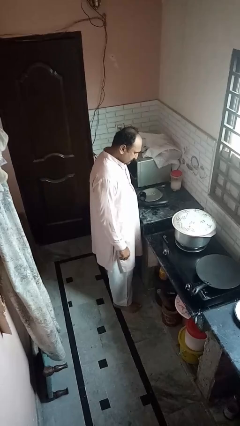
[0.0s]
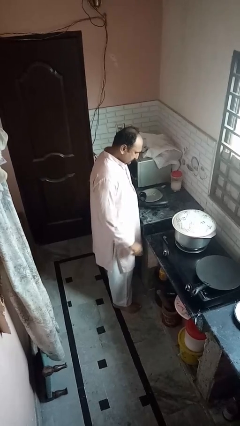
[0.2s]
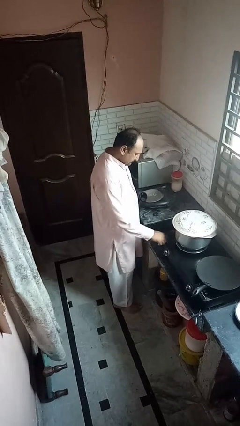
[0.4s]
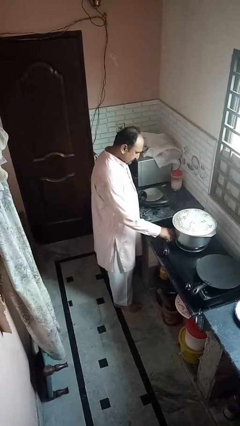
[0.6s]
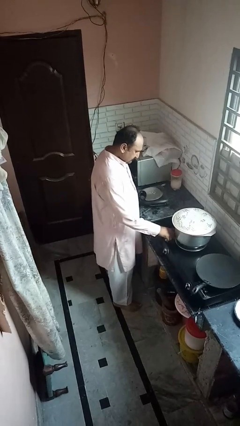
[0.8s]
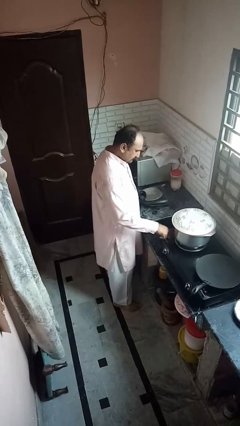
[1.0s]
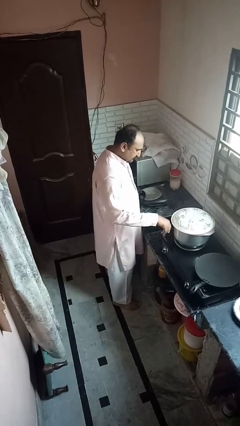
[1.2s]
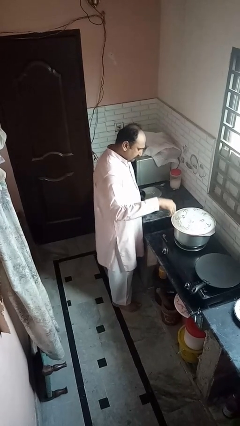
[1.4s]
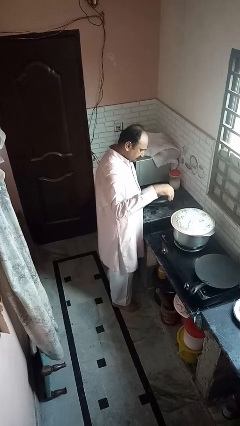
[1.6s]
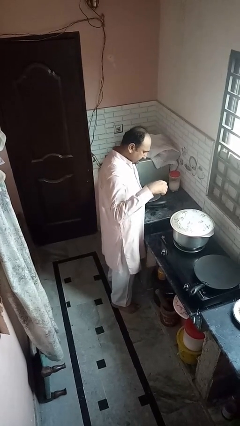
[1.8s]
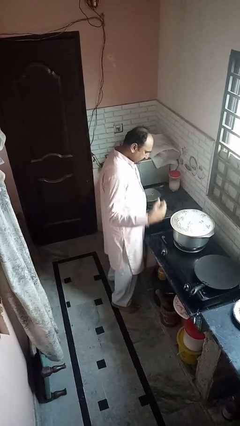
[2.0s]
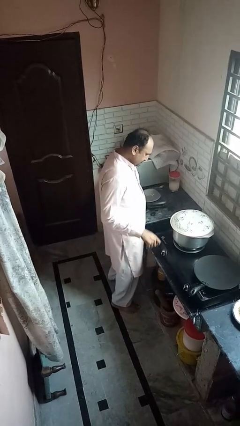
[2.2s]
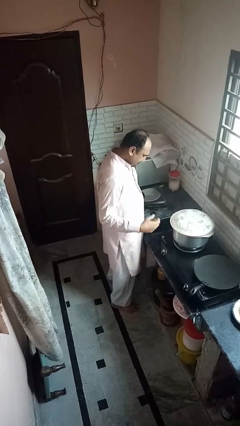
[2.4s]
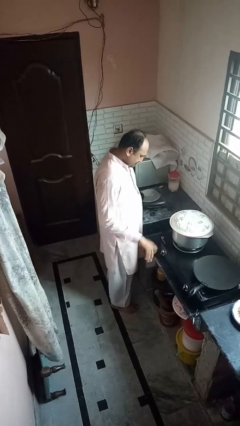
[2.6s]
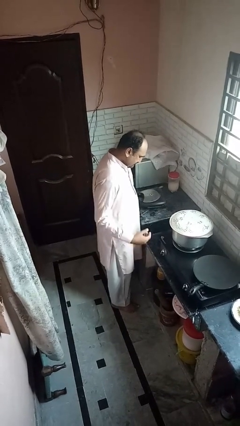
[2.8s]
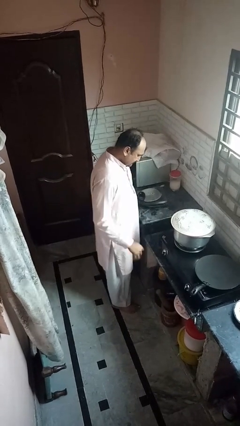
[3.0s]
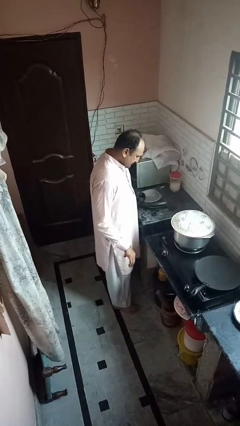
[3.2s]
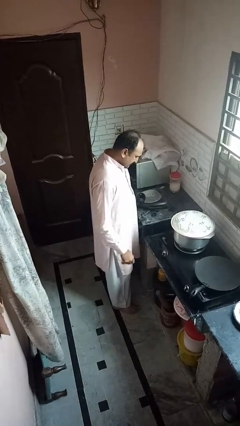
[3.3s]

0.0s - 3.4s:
person burns hand

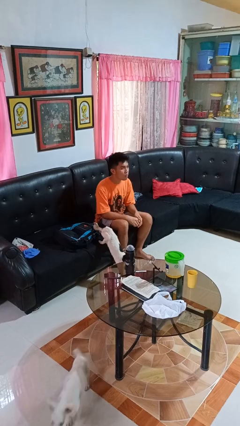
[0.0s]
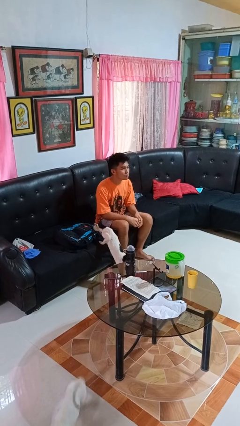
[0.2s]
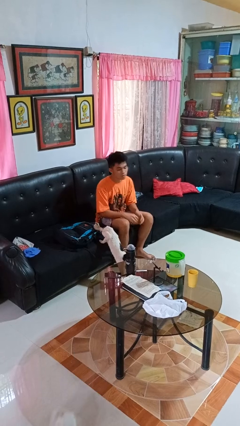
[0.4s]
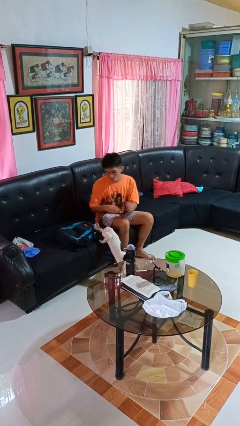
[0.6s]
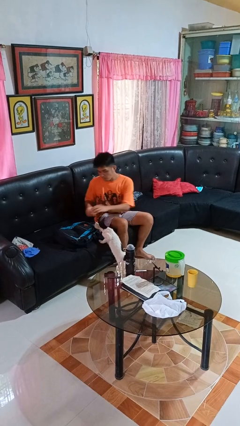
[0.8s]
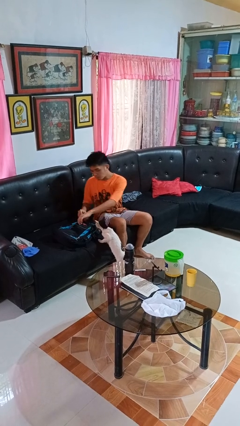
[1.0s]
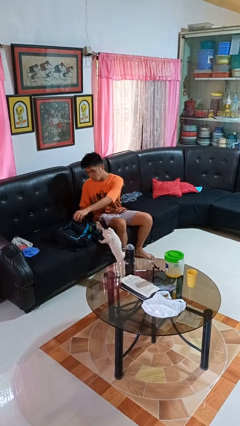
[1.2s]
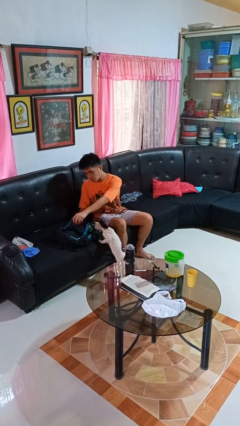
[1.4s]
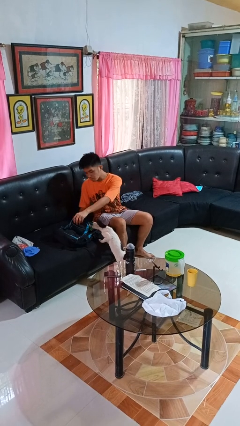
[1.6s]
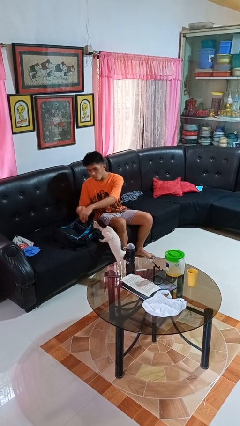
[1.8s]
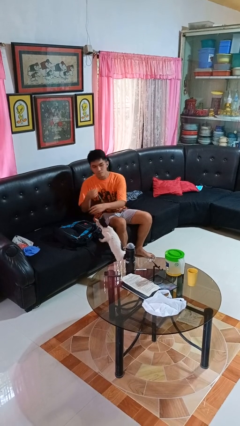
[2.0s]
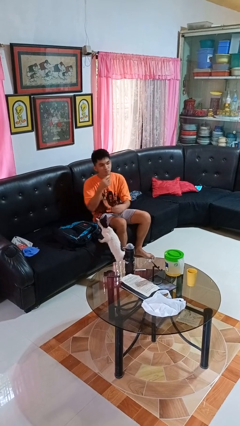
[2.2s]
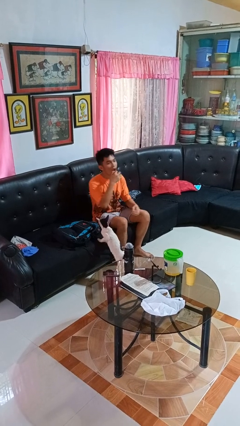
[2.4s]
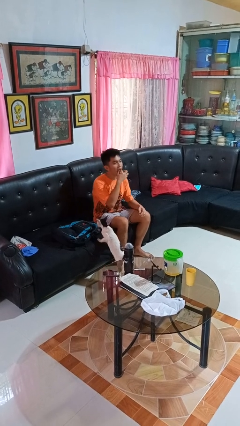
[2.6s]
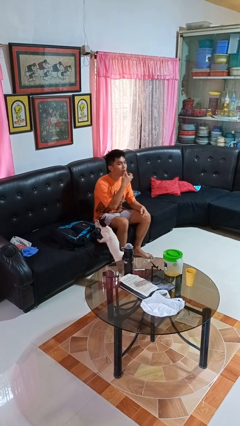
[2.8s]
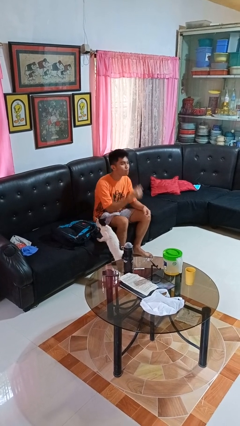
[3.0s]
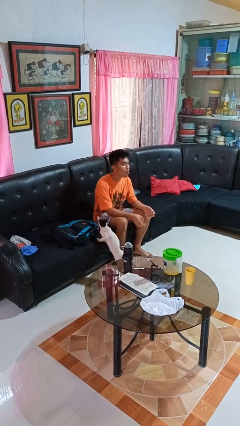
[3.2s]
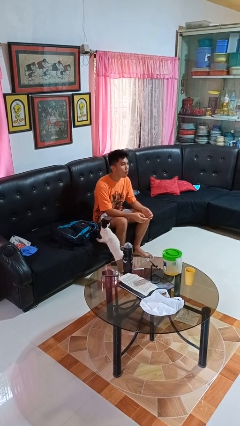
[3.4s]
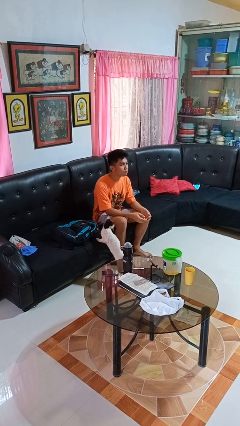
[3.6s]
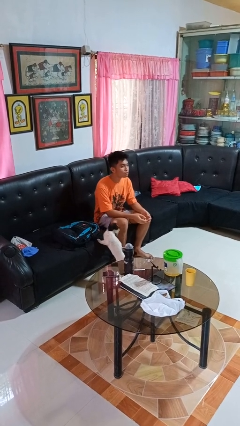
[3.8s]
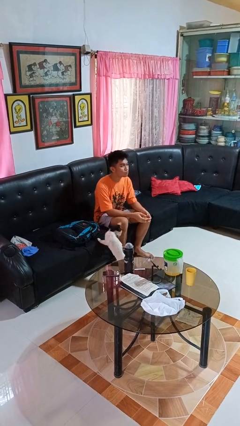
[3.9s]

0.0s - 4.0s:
person eats snack from bag

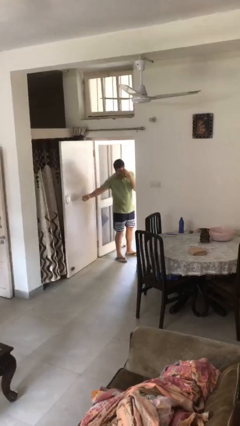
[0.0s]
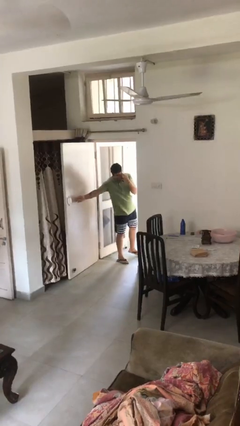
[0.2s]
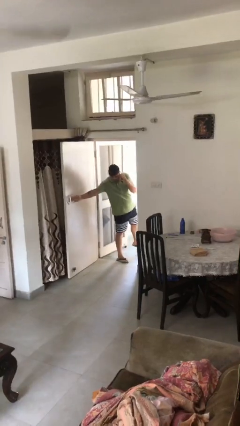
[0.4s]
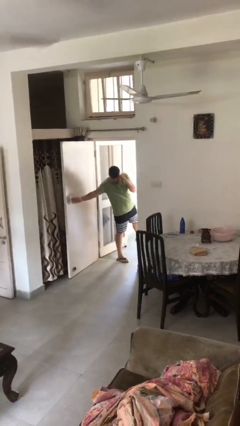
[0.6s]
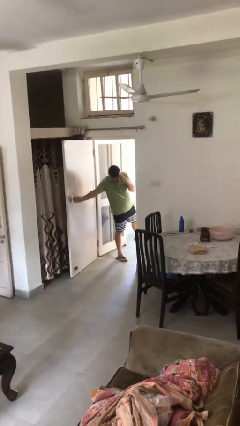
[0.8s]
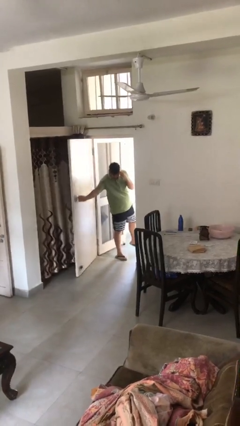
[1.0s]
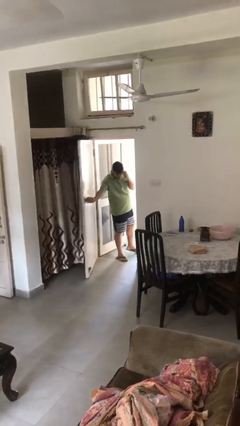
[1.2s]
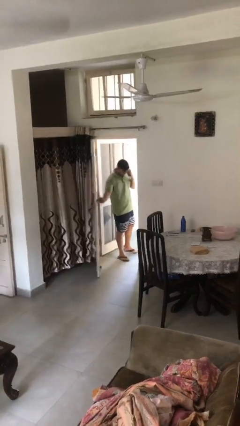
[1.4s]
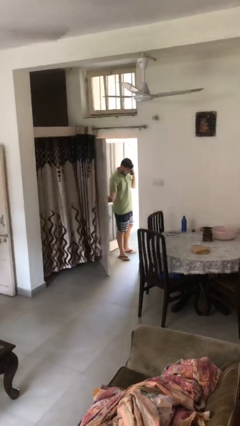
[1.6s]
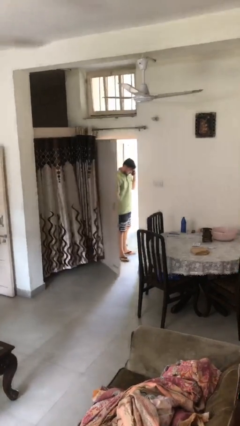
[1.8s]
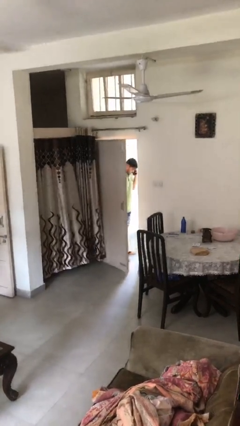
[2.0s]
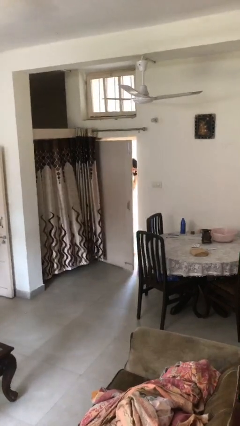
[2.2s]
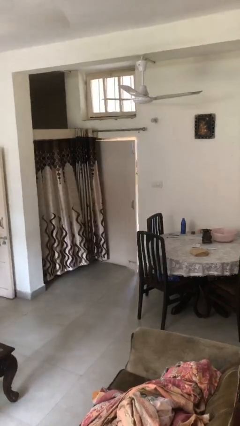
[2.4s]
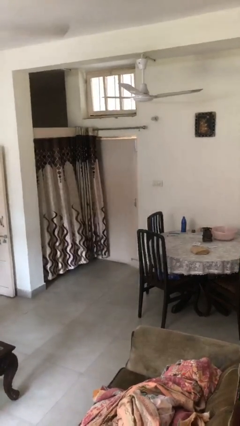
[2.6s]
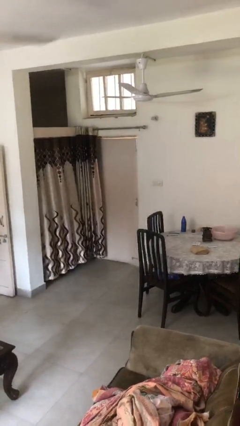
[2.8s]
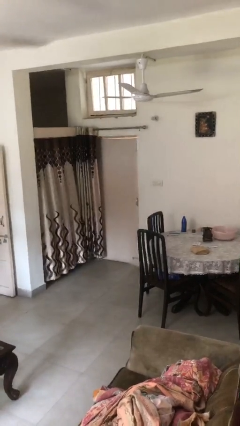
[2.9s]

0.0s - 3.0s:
person closes facility door

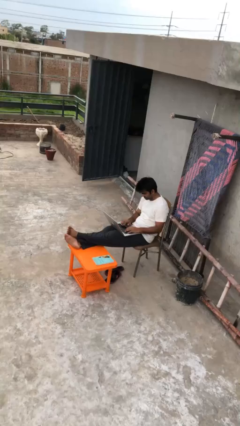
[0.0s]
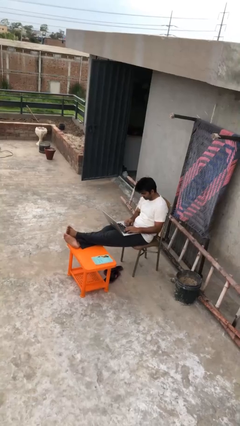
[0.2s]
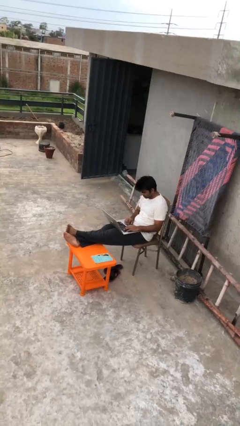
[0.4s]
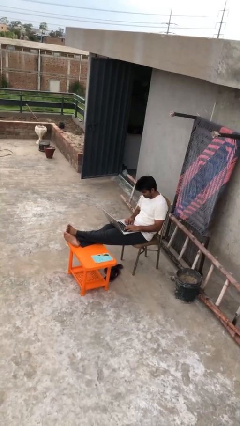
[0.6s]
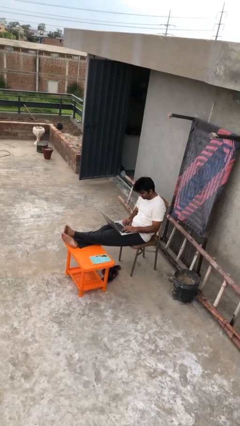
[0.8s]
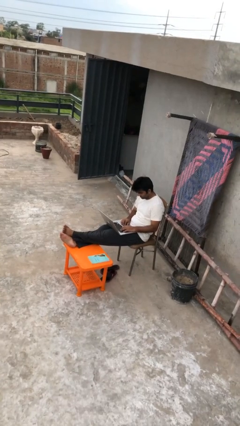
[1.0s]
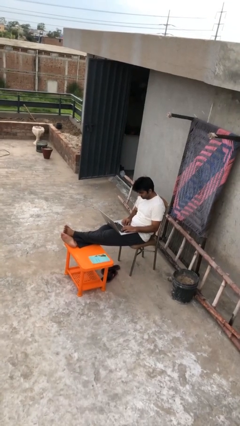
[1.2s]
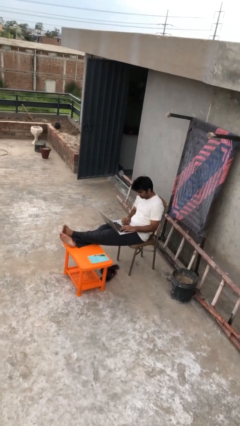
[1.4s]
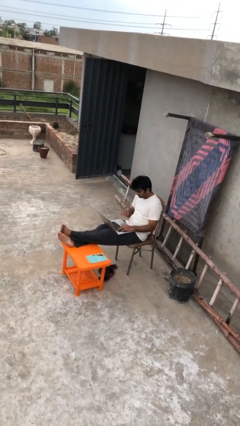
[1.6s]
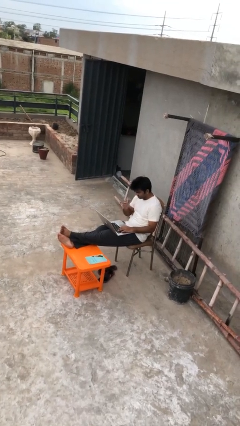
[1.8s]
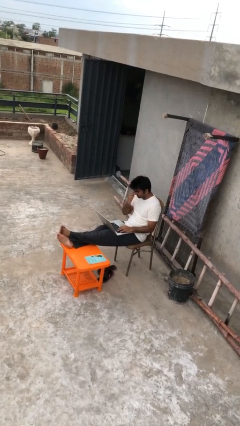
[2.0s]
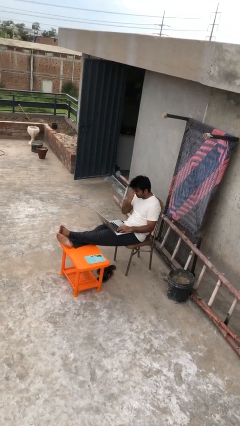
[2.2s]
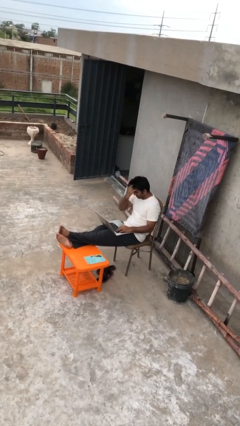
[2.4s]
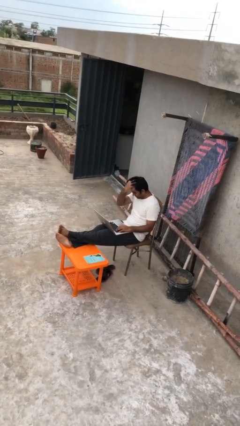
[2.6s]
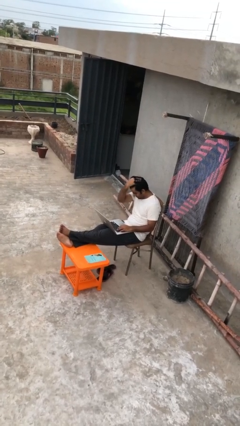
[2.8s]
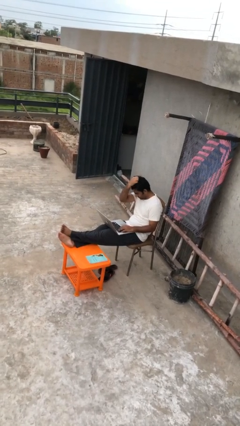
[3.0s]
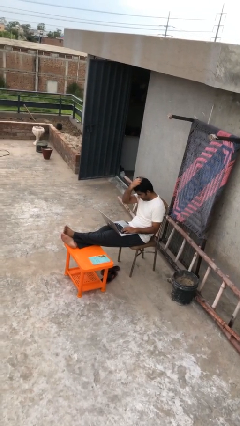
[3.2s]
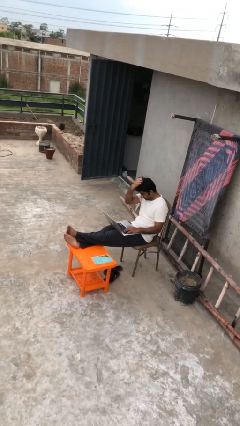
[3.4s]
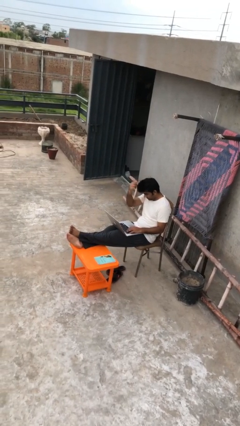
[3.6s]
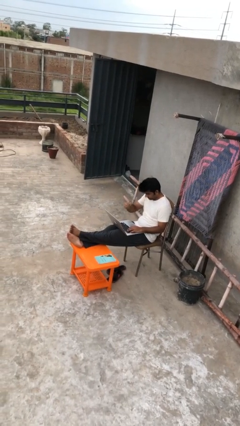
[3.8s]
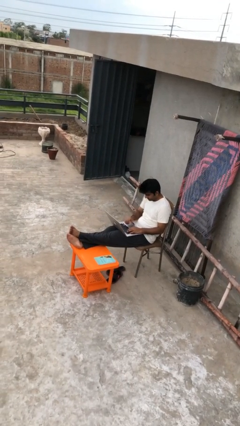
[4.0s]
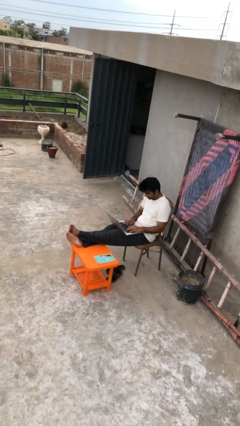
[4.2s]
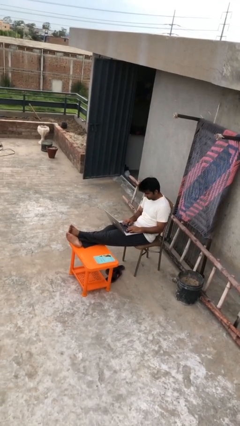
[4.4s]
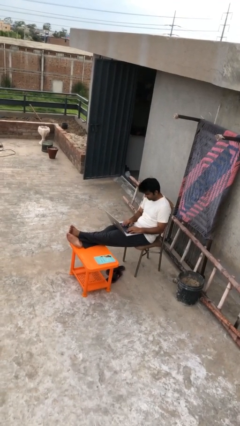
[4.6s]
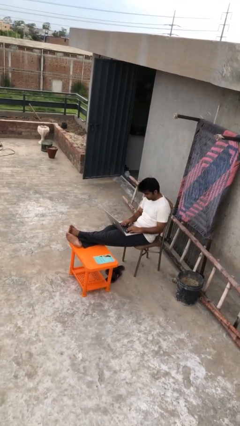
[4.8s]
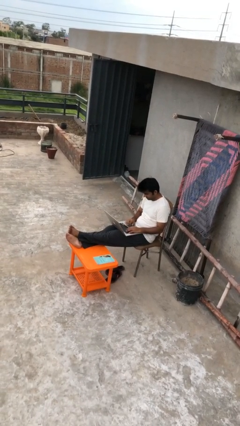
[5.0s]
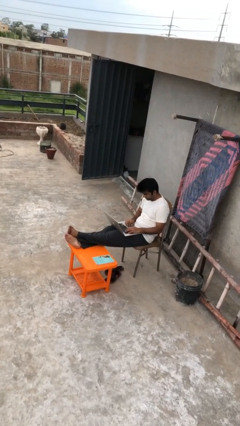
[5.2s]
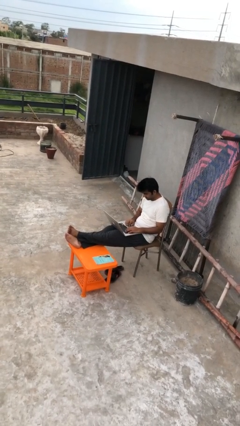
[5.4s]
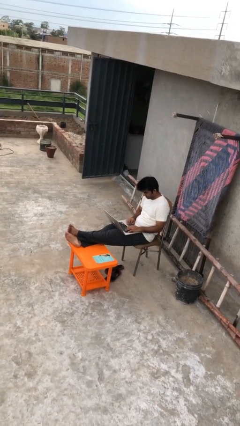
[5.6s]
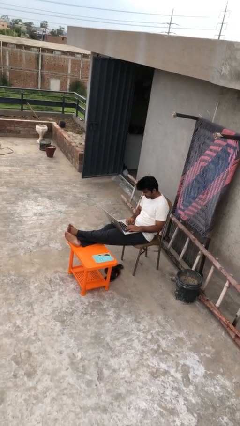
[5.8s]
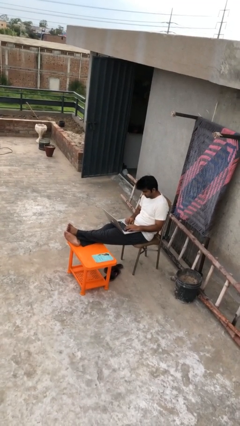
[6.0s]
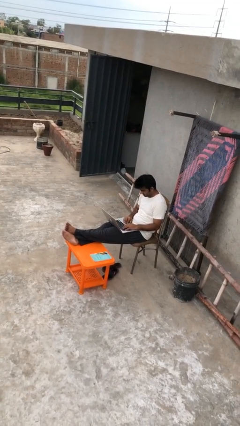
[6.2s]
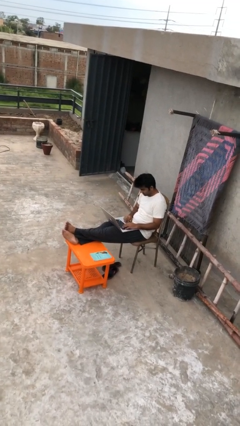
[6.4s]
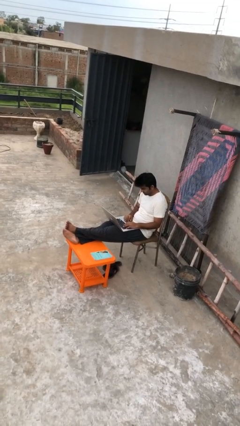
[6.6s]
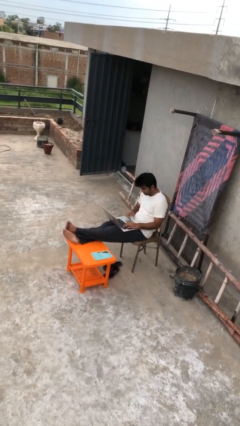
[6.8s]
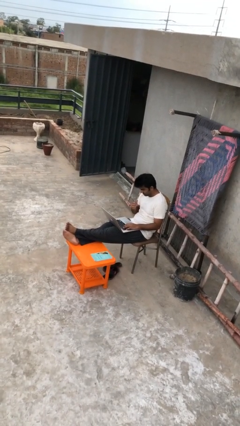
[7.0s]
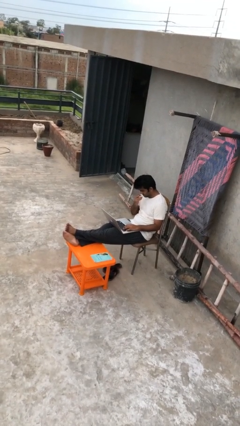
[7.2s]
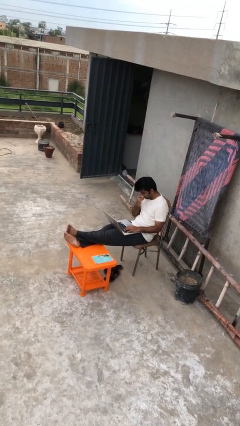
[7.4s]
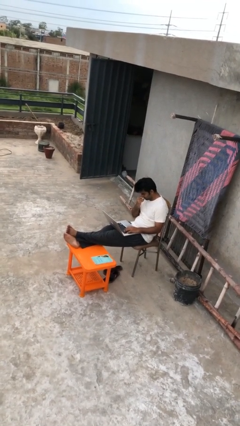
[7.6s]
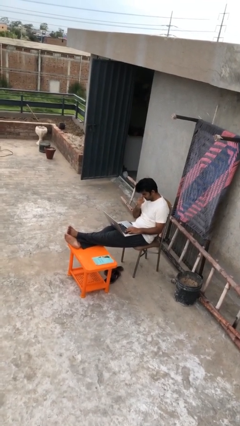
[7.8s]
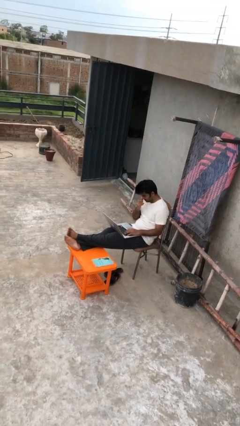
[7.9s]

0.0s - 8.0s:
person interacts with laptop
